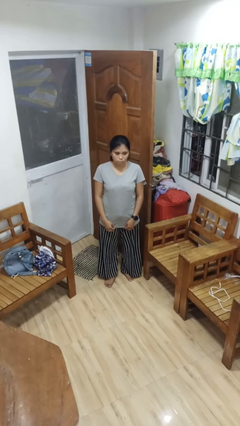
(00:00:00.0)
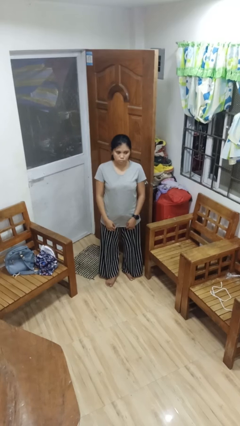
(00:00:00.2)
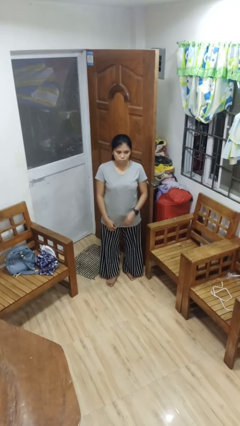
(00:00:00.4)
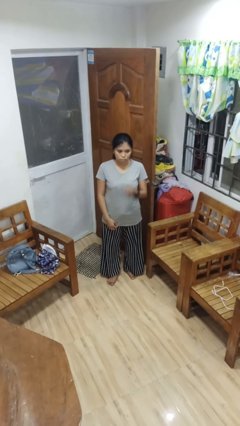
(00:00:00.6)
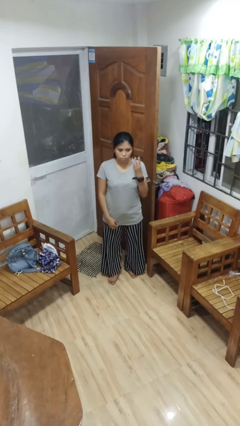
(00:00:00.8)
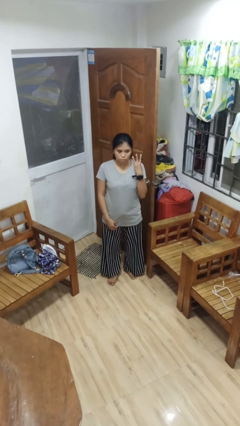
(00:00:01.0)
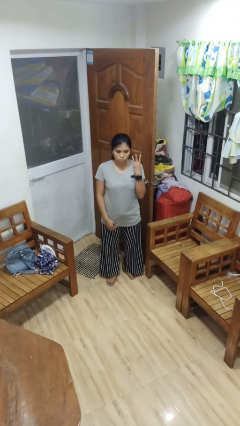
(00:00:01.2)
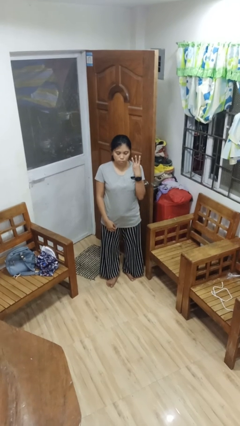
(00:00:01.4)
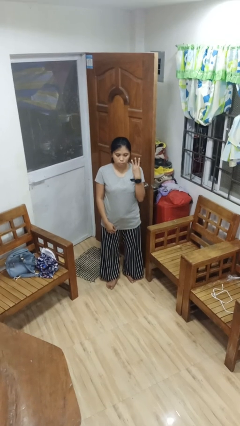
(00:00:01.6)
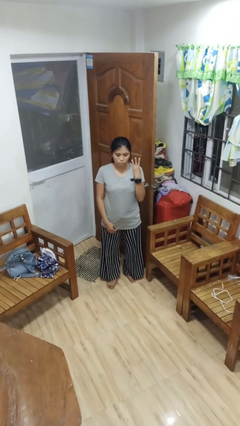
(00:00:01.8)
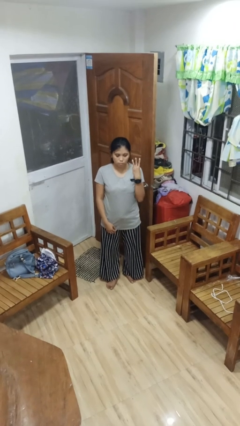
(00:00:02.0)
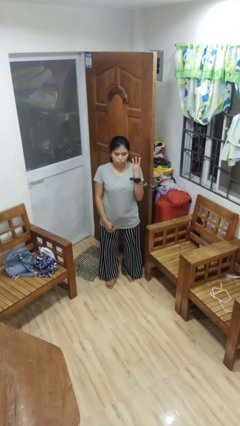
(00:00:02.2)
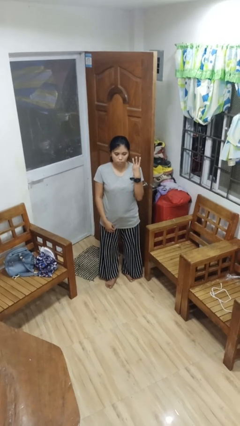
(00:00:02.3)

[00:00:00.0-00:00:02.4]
person gestures number three

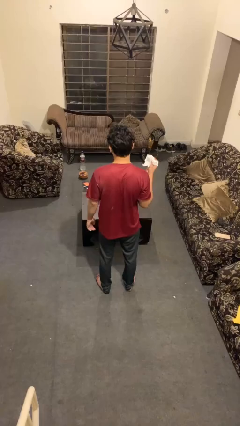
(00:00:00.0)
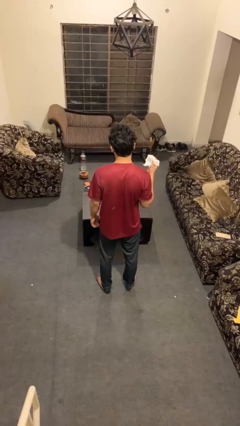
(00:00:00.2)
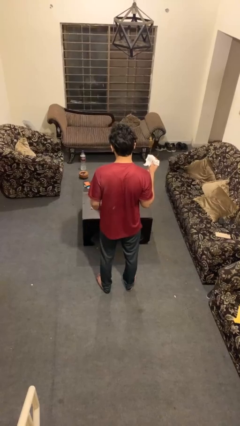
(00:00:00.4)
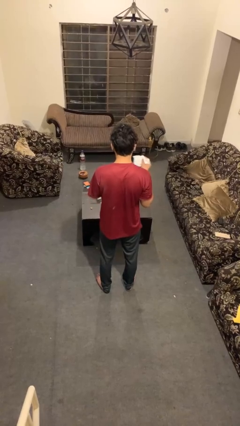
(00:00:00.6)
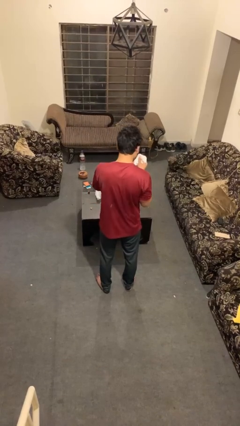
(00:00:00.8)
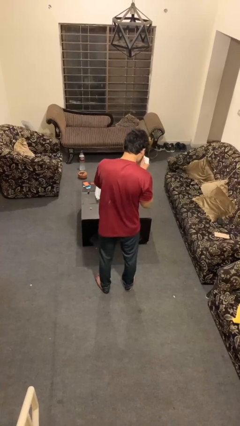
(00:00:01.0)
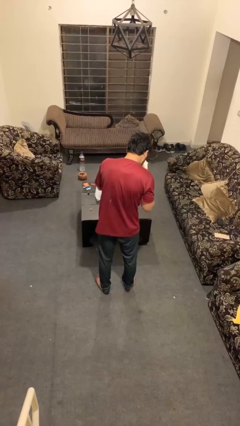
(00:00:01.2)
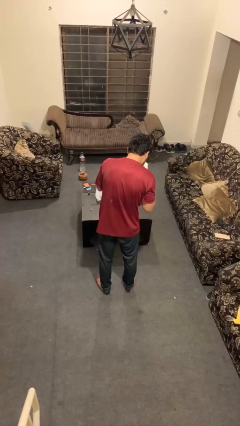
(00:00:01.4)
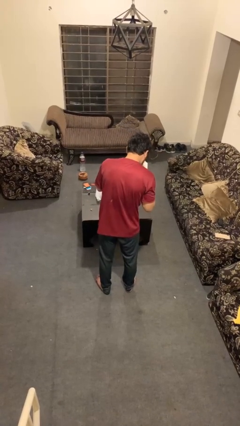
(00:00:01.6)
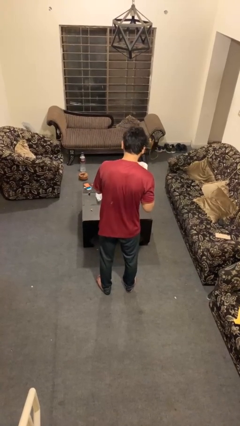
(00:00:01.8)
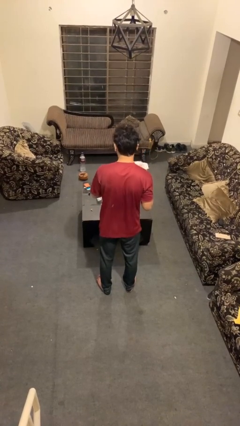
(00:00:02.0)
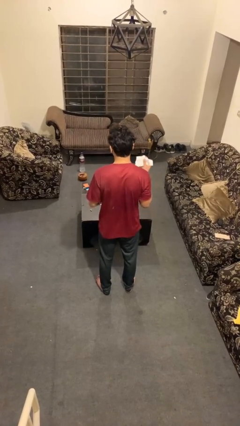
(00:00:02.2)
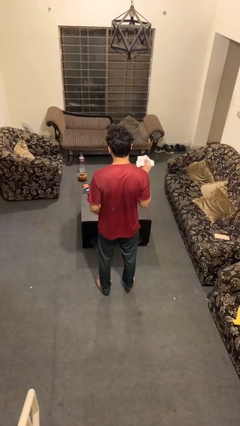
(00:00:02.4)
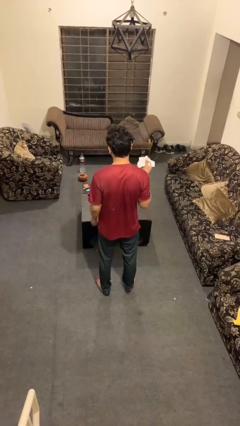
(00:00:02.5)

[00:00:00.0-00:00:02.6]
person blows nose

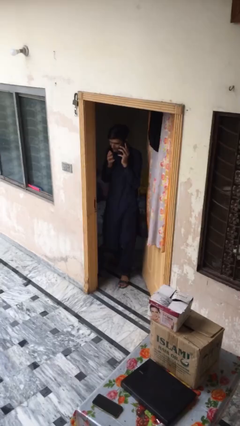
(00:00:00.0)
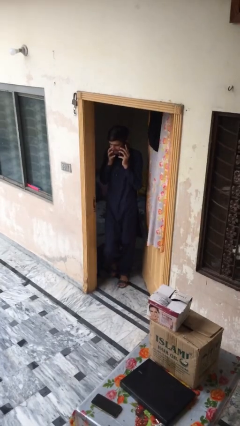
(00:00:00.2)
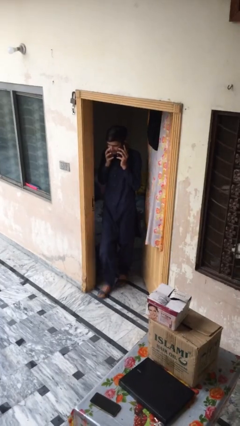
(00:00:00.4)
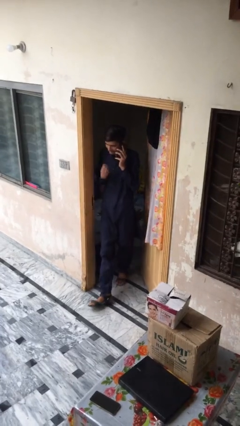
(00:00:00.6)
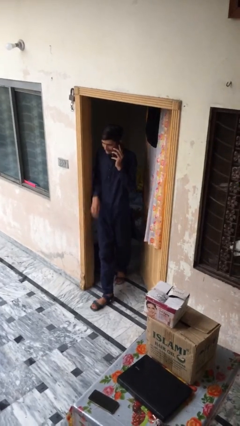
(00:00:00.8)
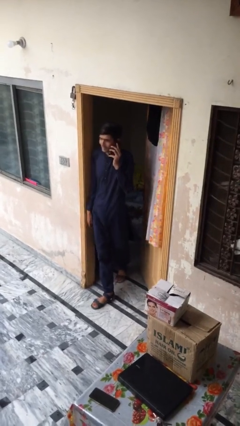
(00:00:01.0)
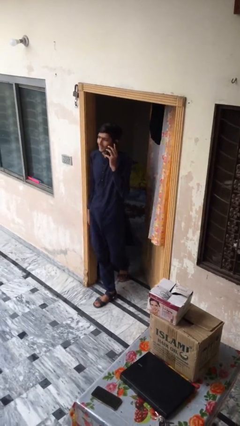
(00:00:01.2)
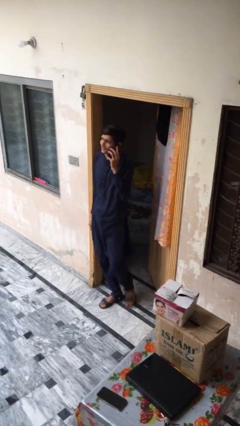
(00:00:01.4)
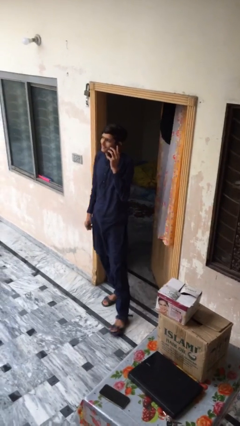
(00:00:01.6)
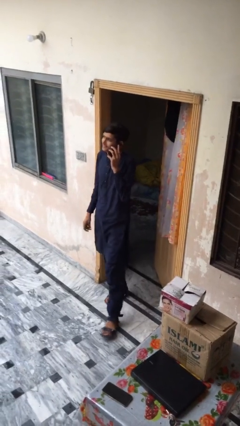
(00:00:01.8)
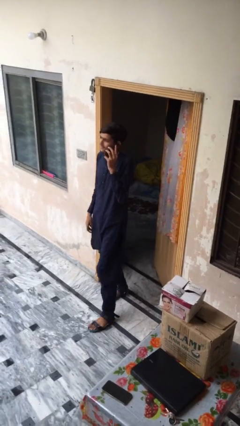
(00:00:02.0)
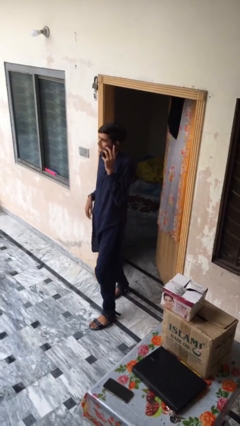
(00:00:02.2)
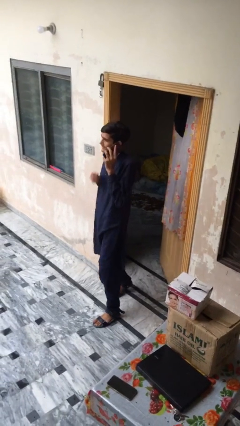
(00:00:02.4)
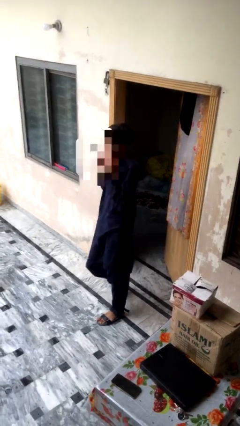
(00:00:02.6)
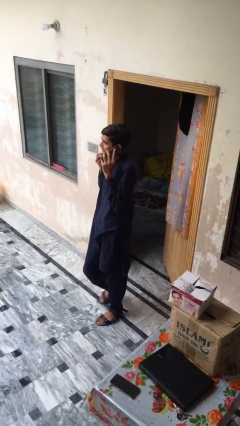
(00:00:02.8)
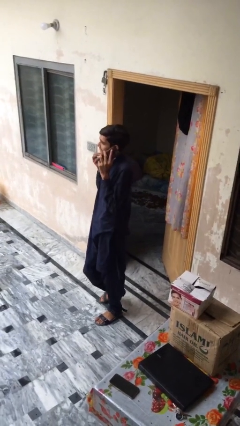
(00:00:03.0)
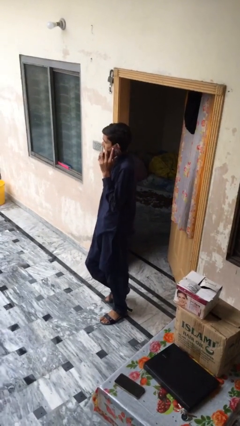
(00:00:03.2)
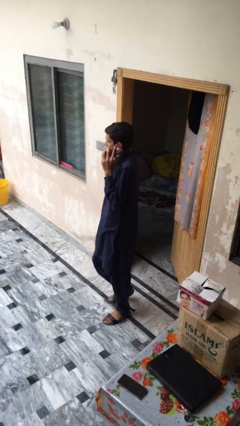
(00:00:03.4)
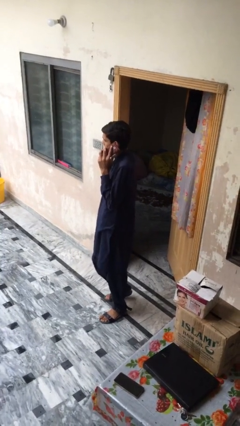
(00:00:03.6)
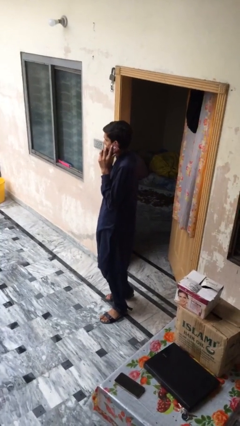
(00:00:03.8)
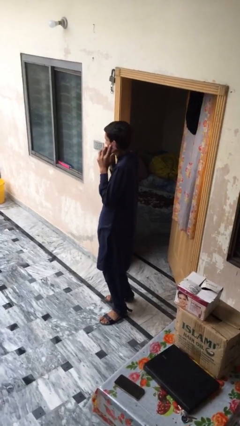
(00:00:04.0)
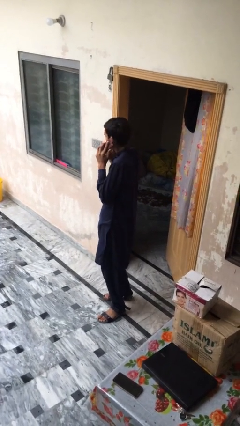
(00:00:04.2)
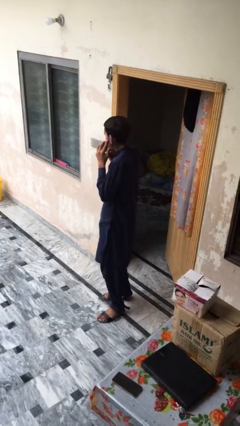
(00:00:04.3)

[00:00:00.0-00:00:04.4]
person enters scene through structure

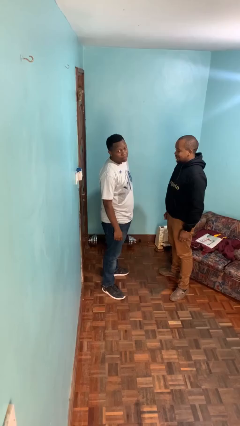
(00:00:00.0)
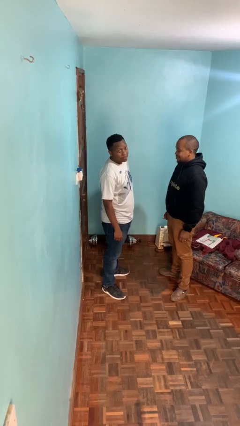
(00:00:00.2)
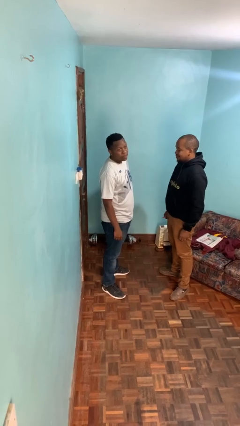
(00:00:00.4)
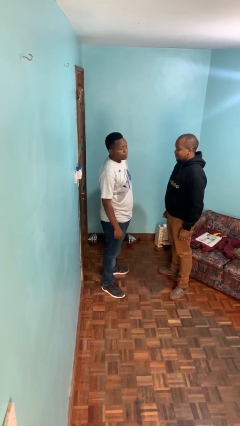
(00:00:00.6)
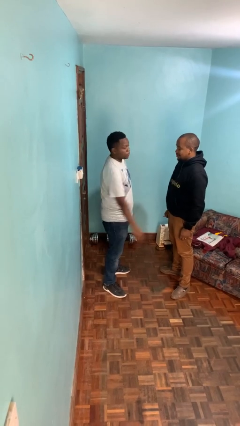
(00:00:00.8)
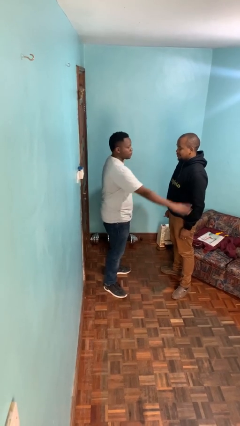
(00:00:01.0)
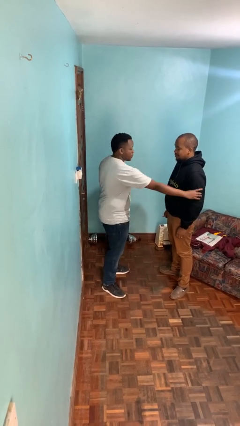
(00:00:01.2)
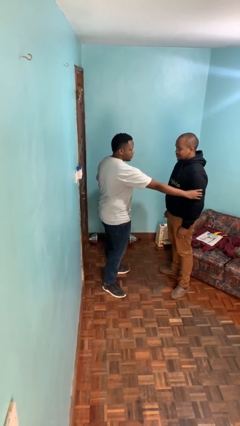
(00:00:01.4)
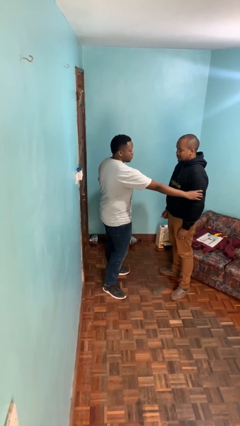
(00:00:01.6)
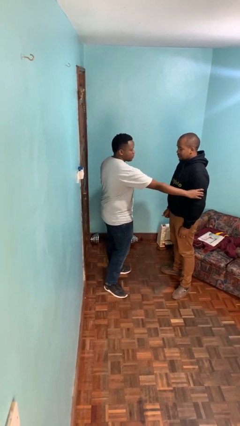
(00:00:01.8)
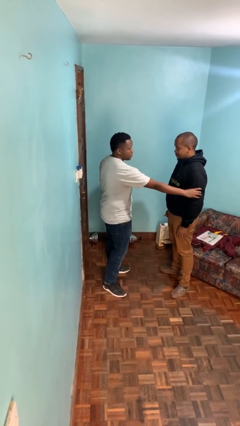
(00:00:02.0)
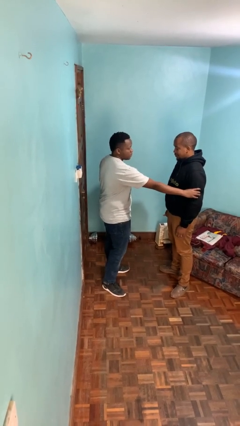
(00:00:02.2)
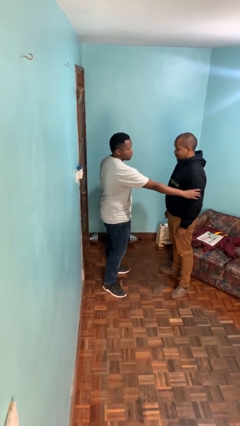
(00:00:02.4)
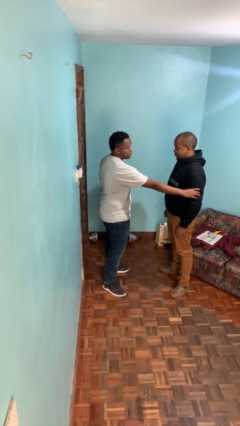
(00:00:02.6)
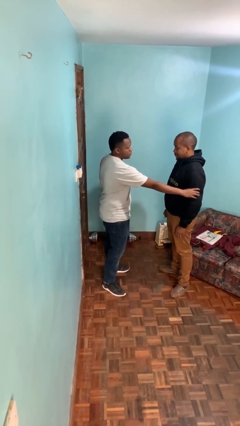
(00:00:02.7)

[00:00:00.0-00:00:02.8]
person grabs person by bicep

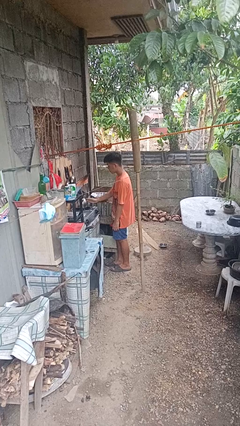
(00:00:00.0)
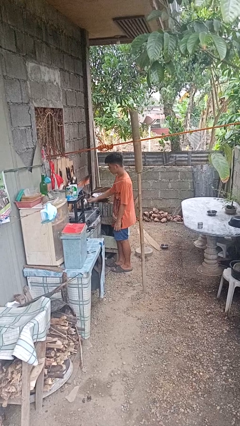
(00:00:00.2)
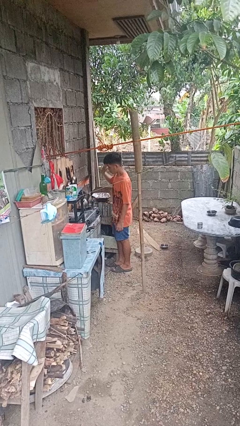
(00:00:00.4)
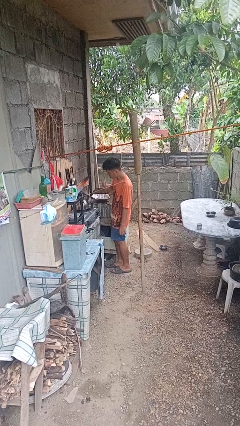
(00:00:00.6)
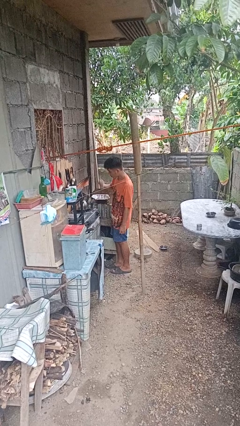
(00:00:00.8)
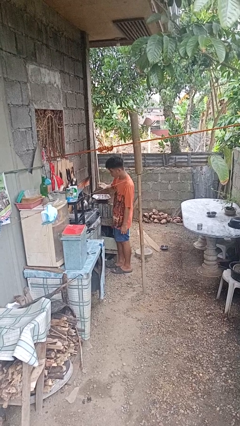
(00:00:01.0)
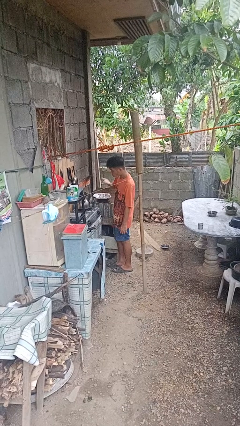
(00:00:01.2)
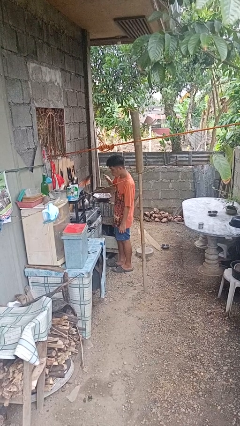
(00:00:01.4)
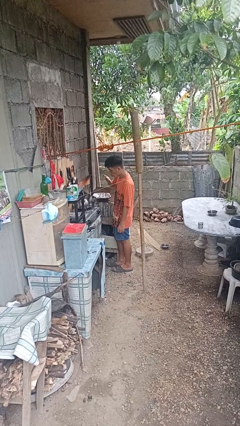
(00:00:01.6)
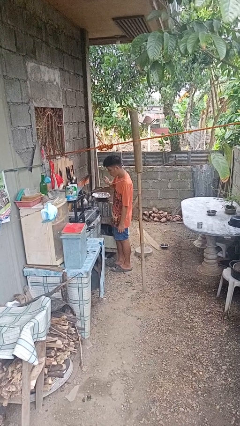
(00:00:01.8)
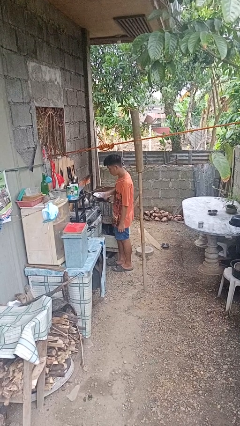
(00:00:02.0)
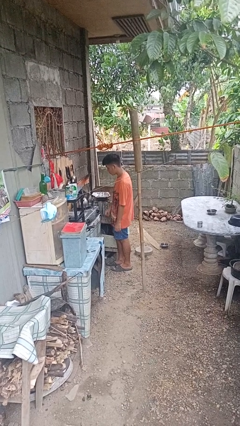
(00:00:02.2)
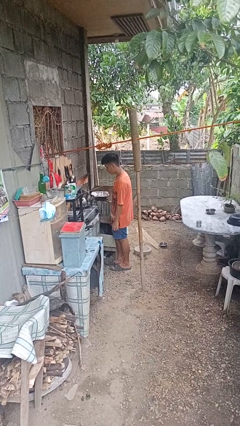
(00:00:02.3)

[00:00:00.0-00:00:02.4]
person burns hand

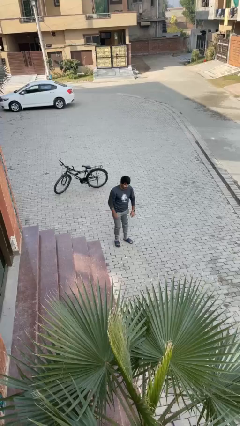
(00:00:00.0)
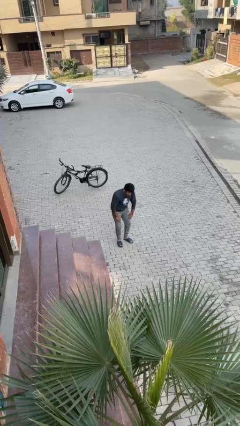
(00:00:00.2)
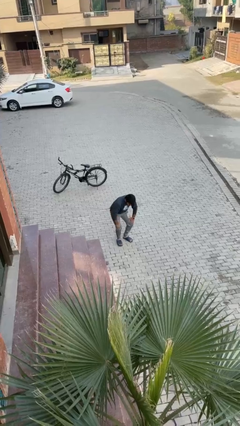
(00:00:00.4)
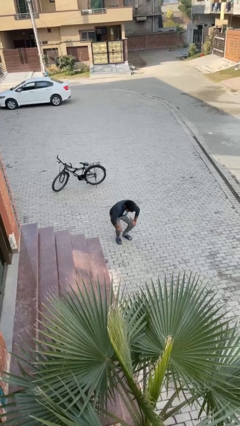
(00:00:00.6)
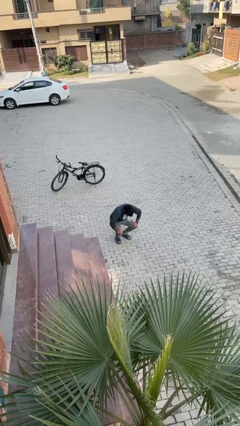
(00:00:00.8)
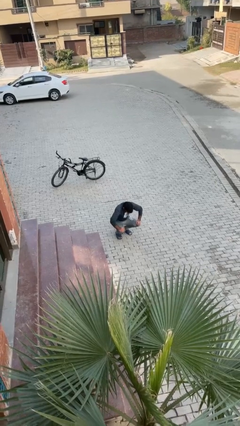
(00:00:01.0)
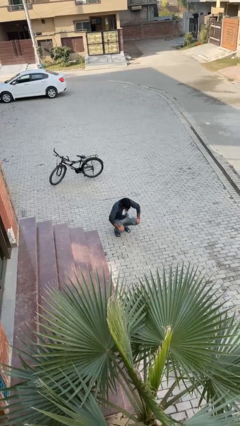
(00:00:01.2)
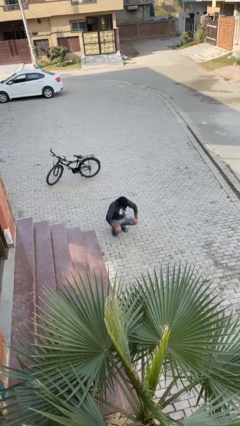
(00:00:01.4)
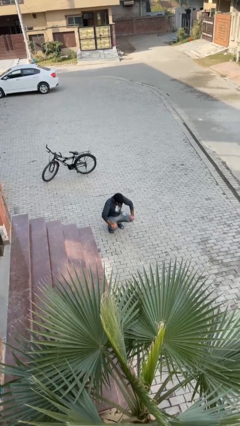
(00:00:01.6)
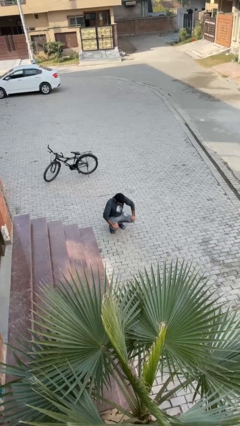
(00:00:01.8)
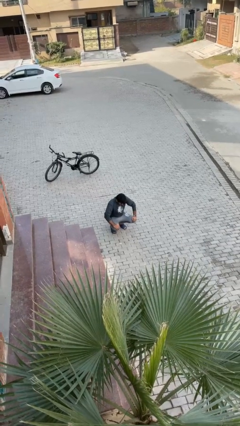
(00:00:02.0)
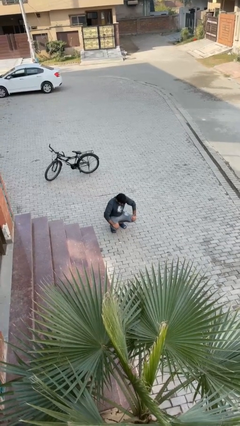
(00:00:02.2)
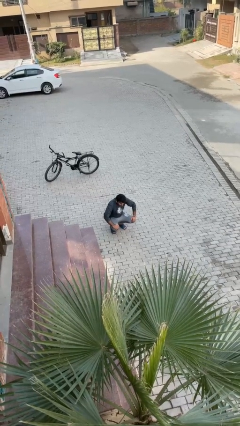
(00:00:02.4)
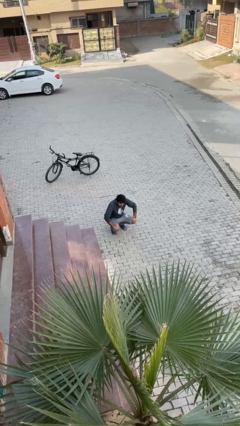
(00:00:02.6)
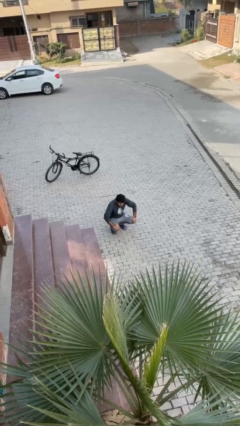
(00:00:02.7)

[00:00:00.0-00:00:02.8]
person sits down
